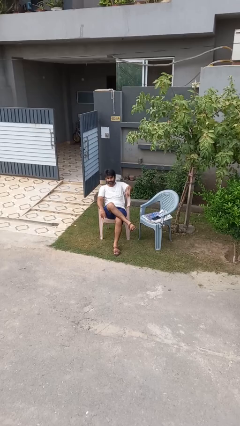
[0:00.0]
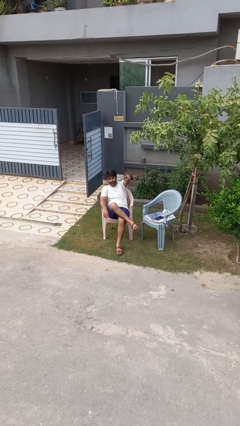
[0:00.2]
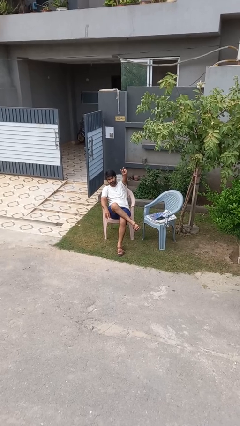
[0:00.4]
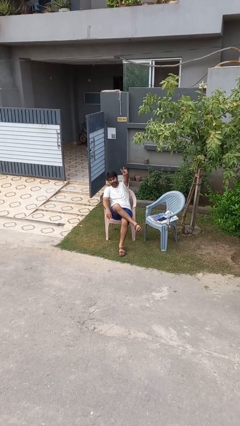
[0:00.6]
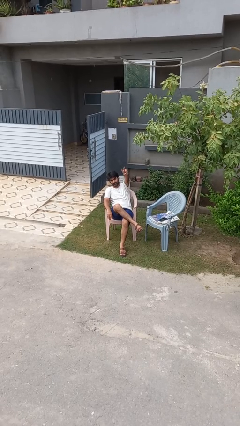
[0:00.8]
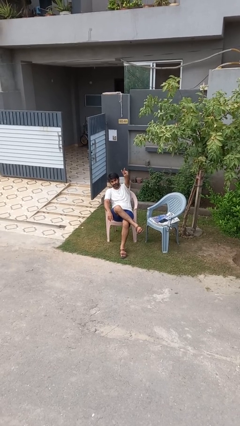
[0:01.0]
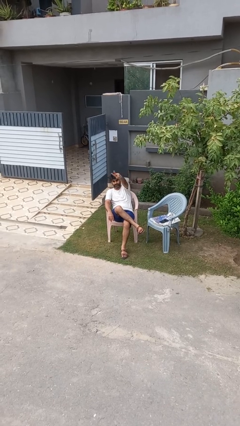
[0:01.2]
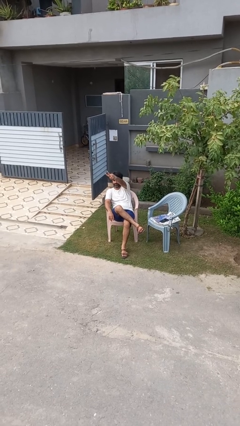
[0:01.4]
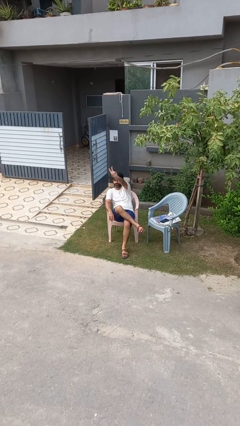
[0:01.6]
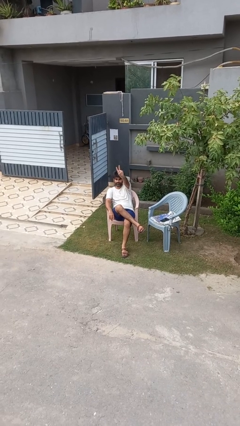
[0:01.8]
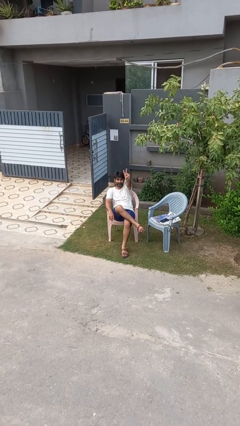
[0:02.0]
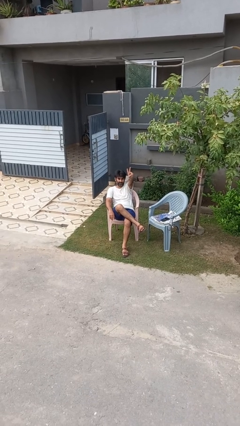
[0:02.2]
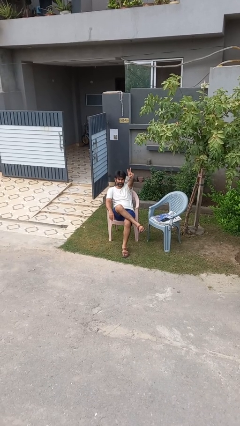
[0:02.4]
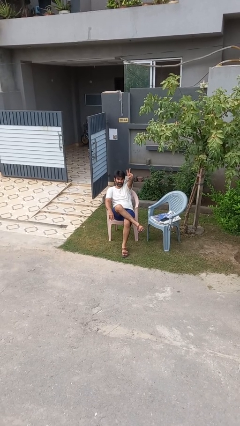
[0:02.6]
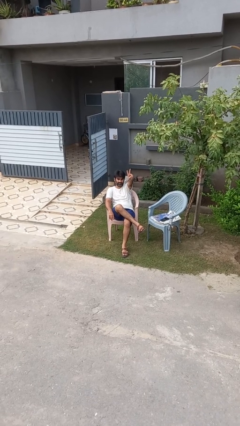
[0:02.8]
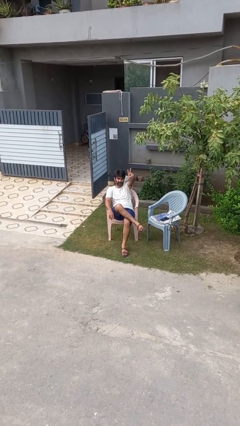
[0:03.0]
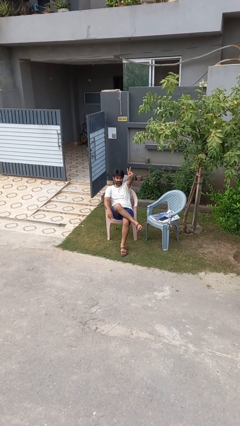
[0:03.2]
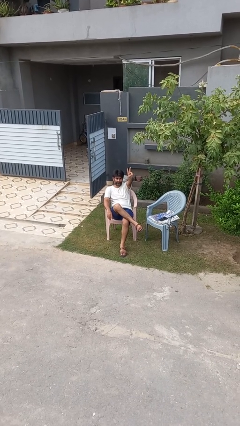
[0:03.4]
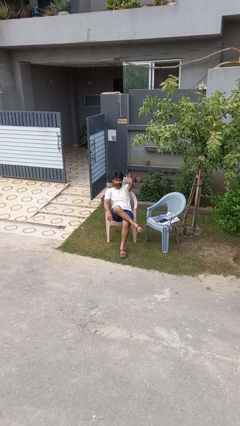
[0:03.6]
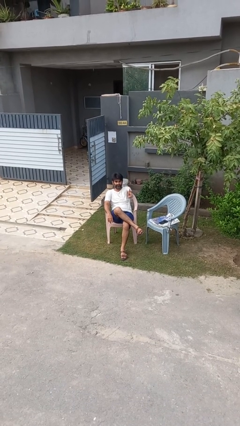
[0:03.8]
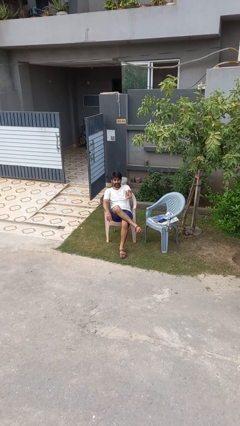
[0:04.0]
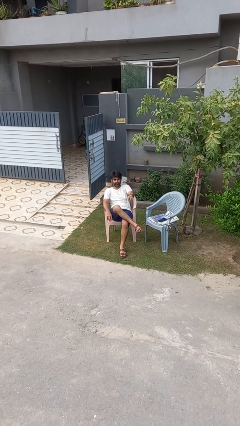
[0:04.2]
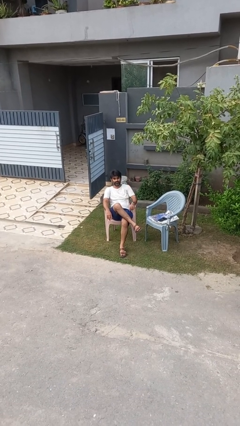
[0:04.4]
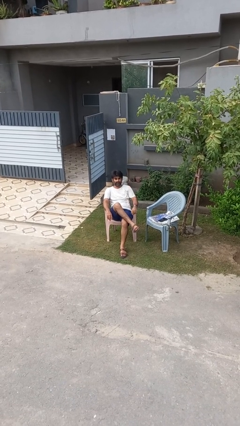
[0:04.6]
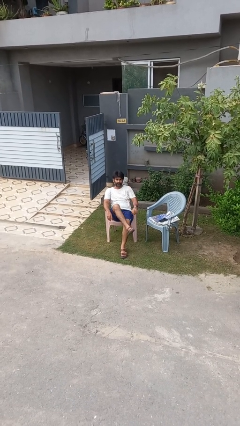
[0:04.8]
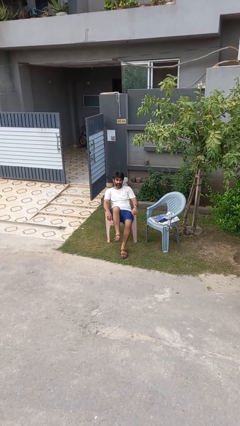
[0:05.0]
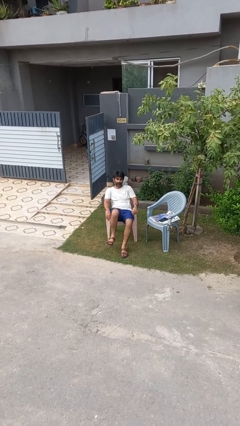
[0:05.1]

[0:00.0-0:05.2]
person gestures peace

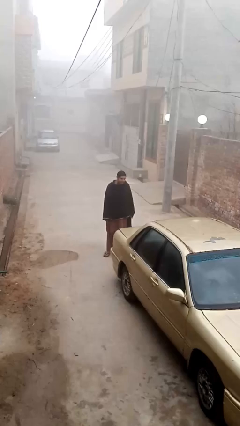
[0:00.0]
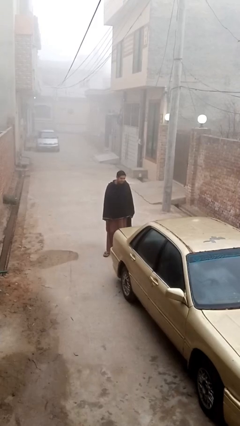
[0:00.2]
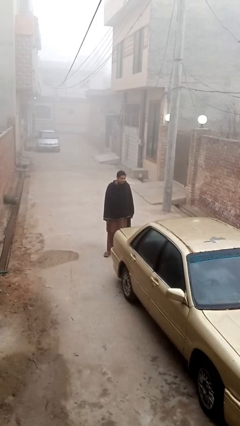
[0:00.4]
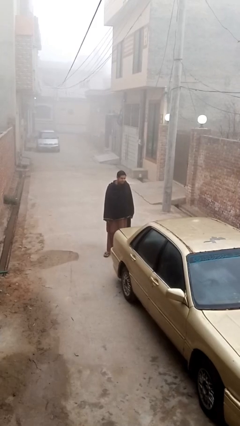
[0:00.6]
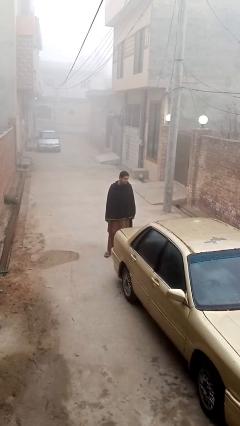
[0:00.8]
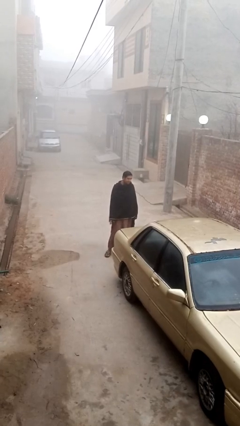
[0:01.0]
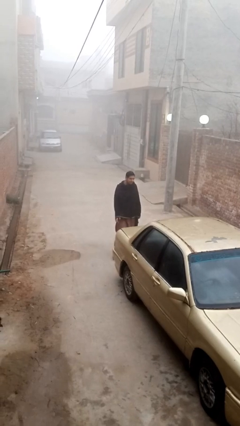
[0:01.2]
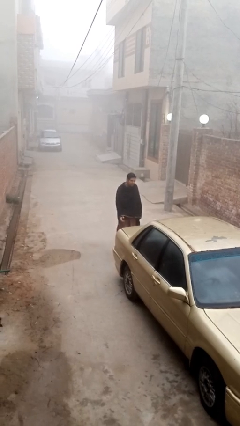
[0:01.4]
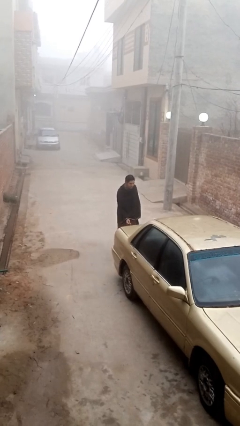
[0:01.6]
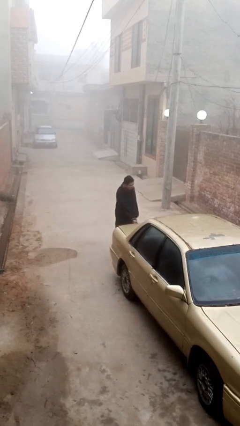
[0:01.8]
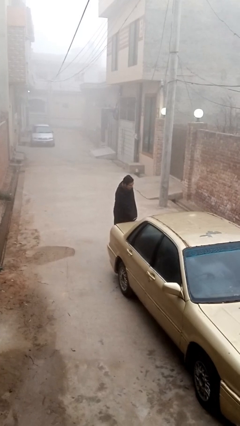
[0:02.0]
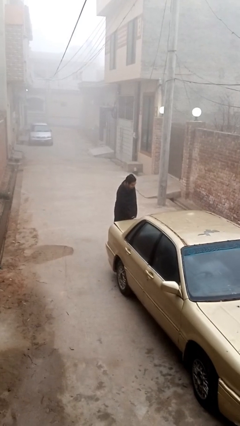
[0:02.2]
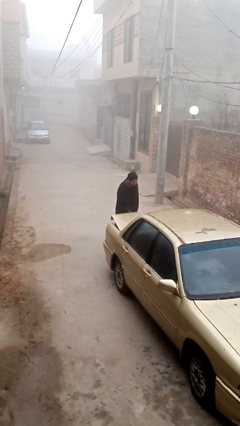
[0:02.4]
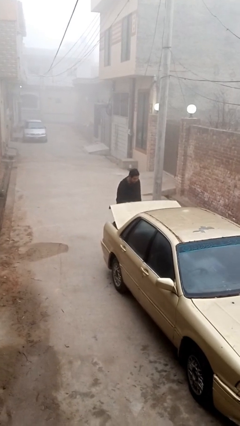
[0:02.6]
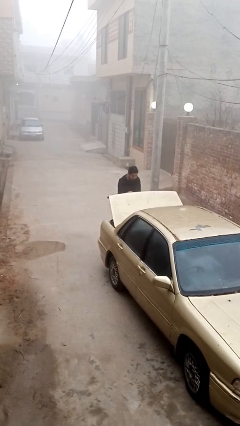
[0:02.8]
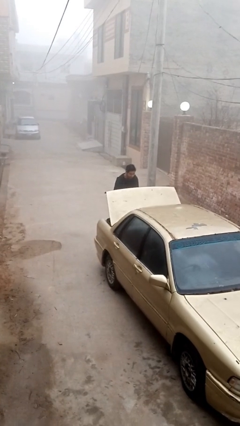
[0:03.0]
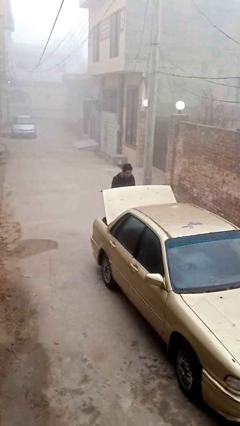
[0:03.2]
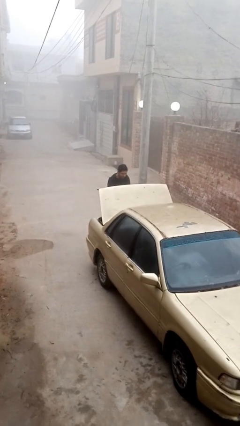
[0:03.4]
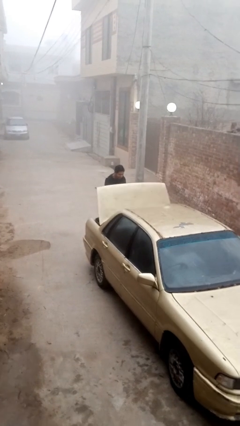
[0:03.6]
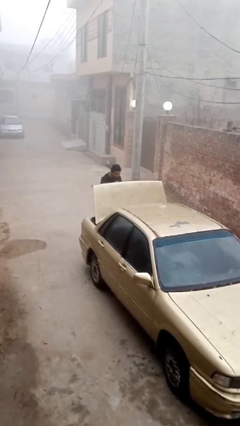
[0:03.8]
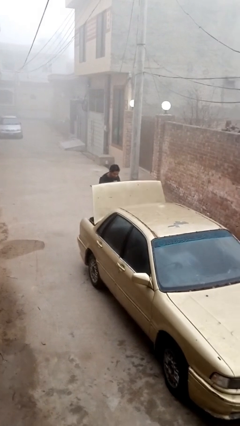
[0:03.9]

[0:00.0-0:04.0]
person opens car trunk

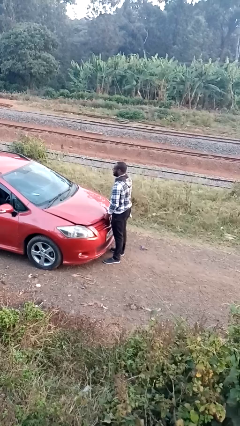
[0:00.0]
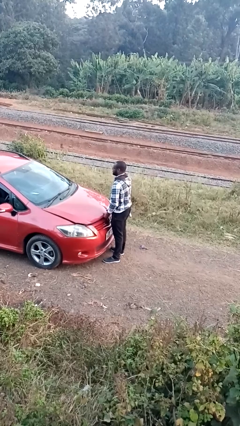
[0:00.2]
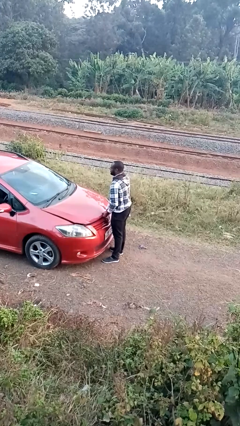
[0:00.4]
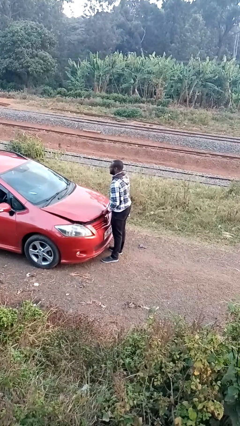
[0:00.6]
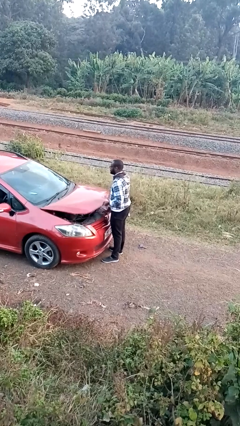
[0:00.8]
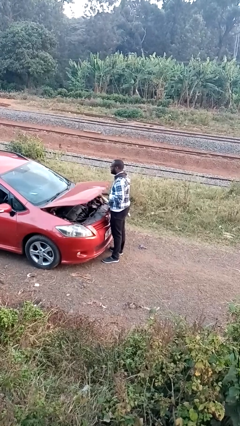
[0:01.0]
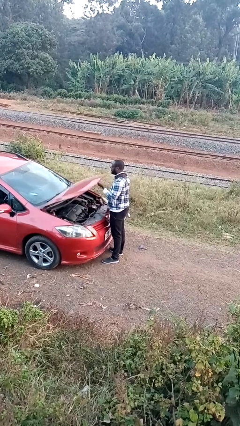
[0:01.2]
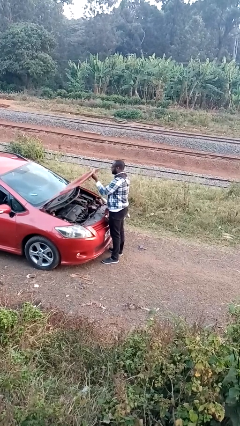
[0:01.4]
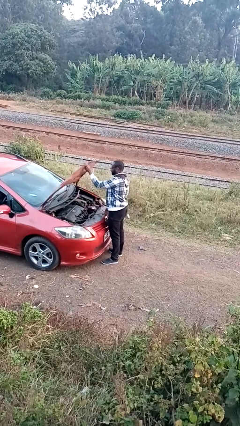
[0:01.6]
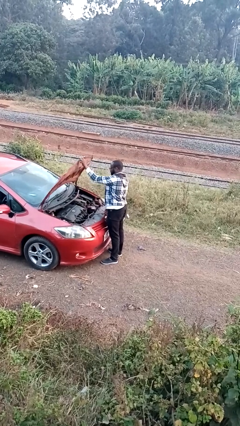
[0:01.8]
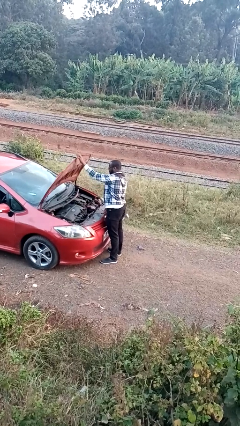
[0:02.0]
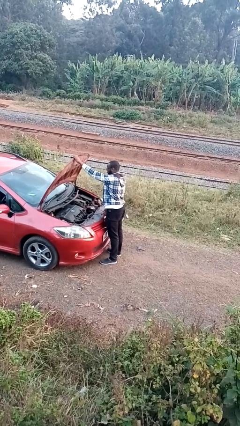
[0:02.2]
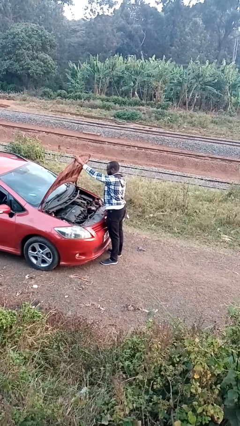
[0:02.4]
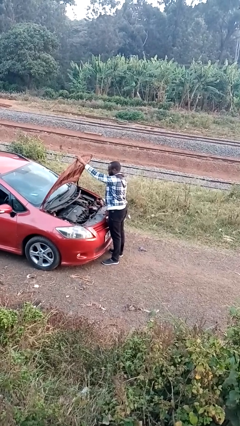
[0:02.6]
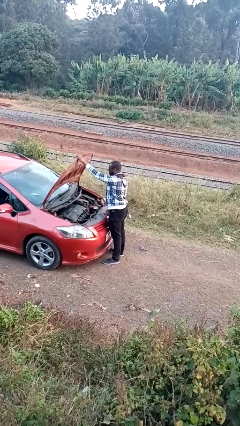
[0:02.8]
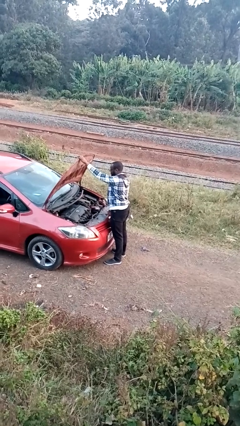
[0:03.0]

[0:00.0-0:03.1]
person opens car hood

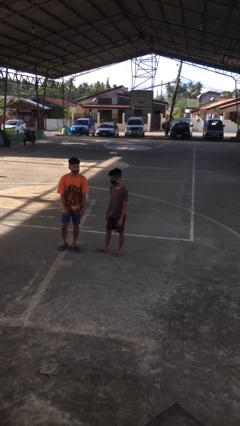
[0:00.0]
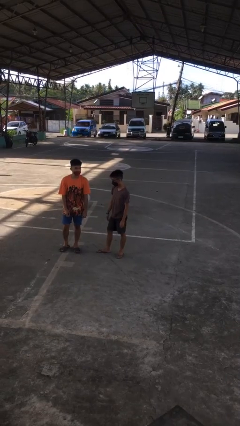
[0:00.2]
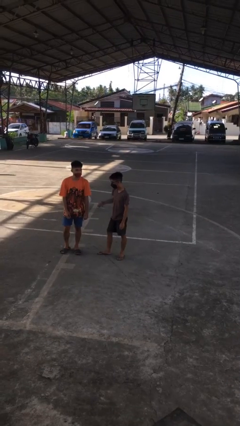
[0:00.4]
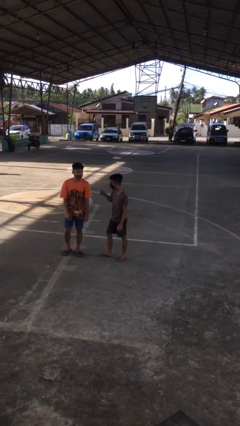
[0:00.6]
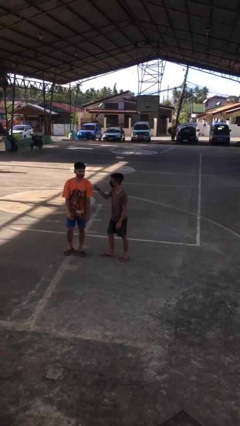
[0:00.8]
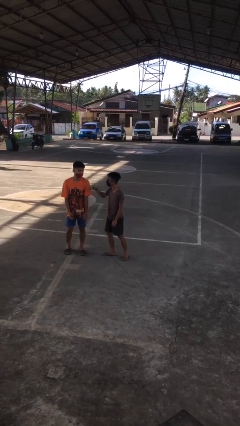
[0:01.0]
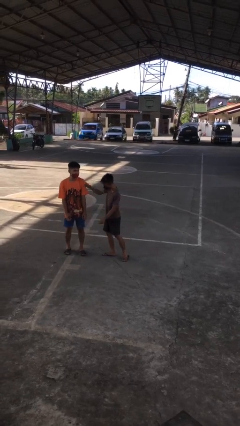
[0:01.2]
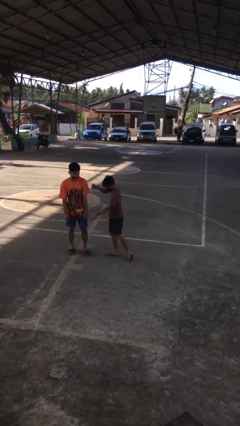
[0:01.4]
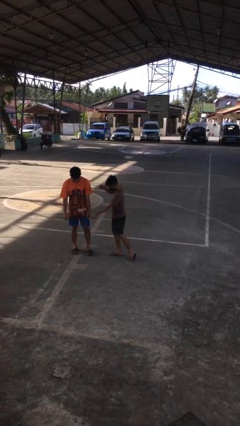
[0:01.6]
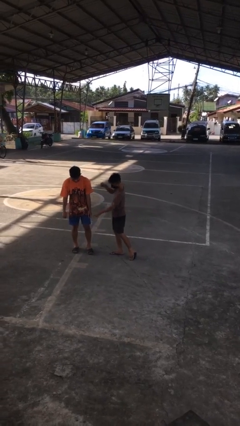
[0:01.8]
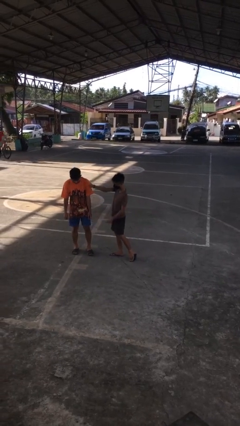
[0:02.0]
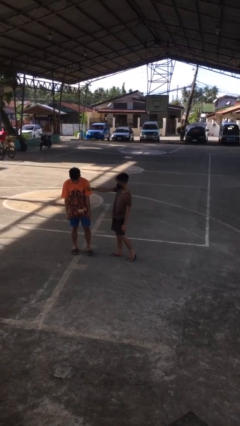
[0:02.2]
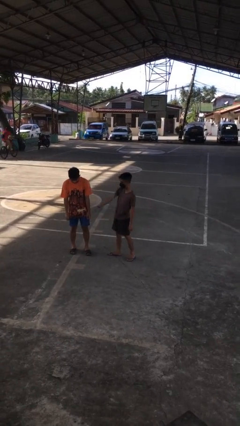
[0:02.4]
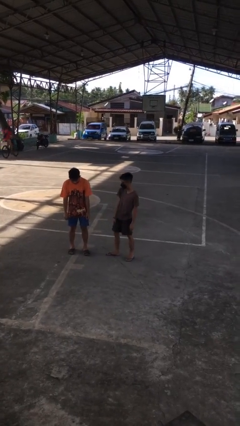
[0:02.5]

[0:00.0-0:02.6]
person pounds shoulders of person

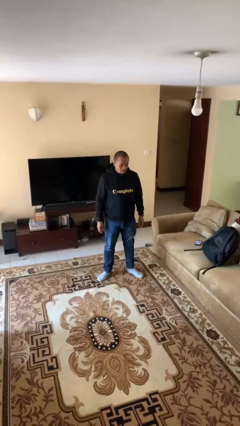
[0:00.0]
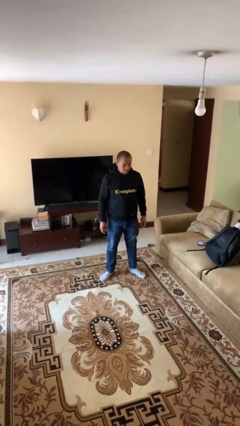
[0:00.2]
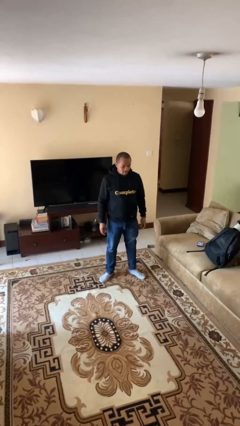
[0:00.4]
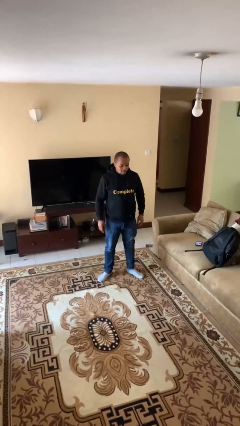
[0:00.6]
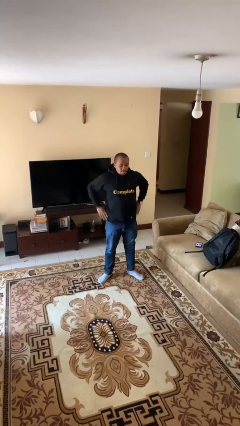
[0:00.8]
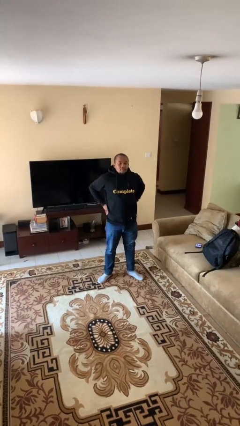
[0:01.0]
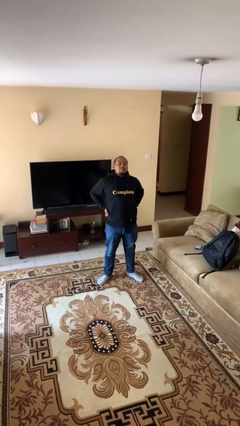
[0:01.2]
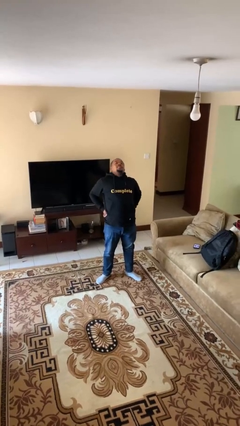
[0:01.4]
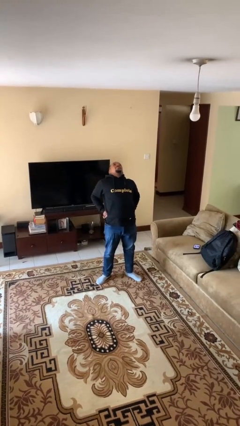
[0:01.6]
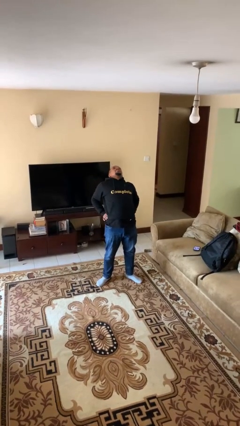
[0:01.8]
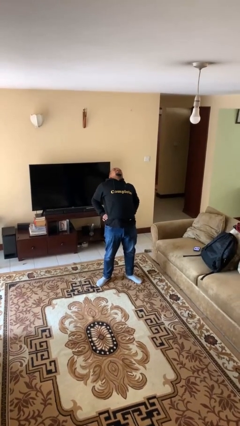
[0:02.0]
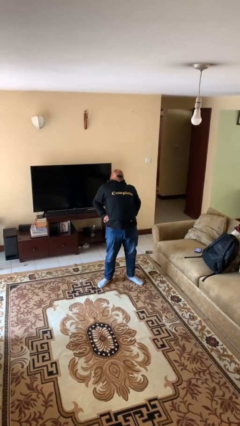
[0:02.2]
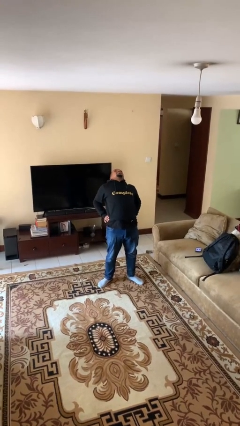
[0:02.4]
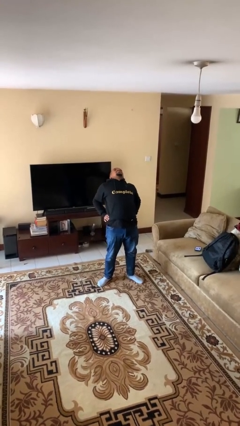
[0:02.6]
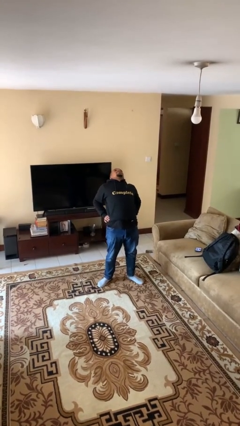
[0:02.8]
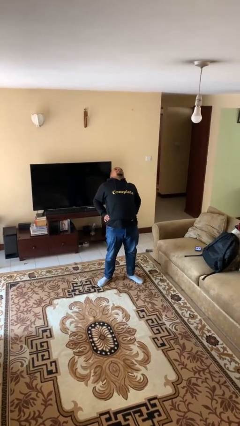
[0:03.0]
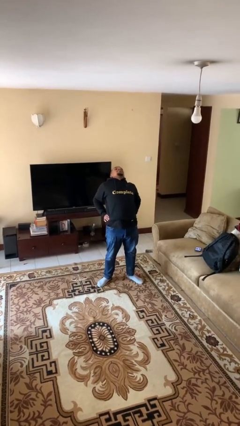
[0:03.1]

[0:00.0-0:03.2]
person stretches back
